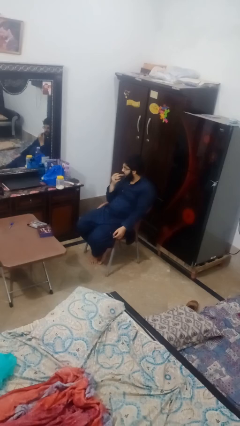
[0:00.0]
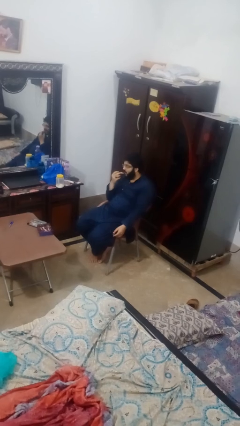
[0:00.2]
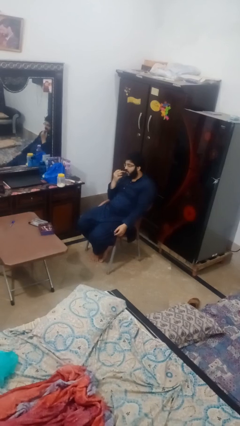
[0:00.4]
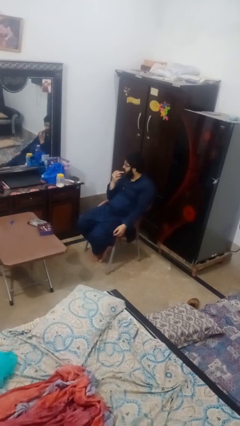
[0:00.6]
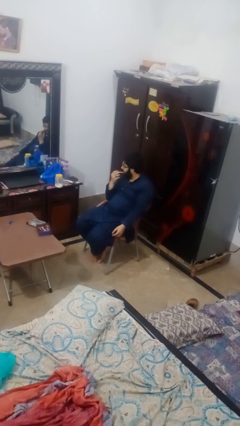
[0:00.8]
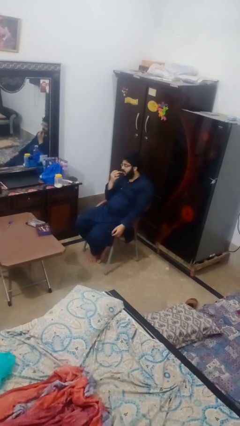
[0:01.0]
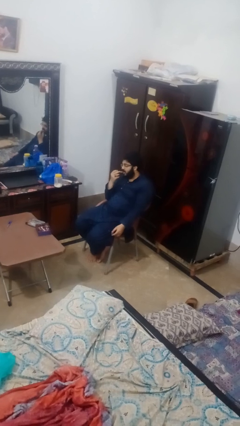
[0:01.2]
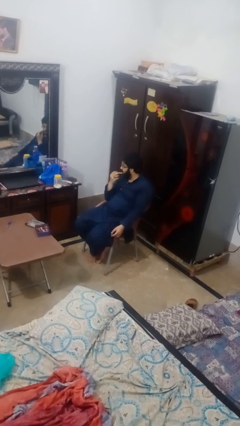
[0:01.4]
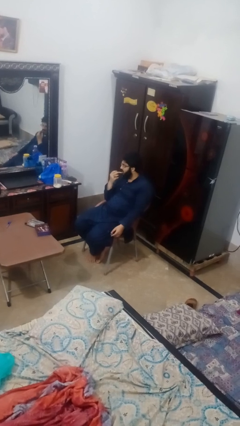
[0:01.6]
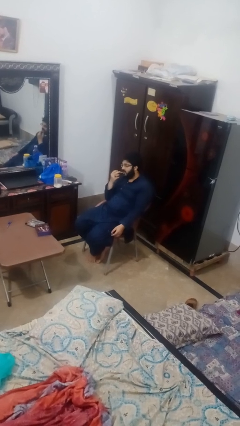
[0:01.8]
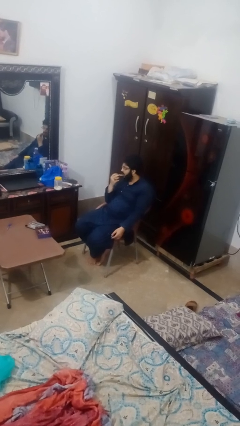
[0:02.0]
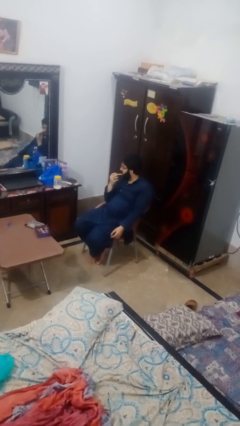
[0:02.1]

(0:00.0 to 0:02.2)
person applies lip makeup

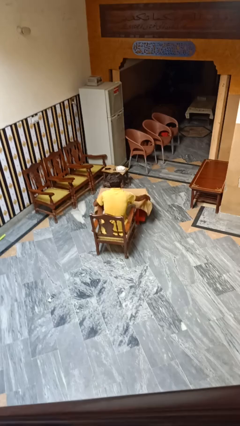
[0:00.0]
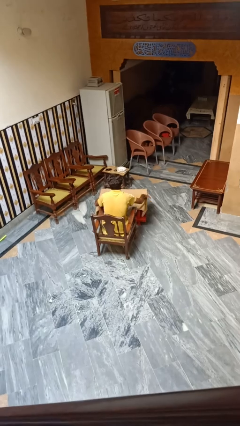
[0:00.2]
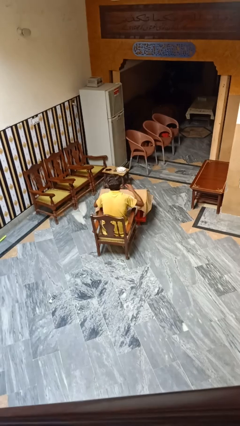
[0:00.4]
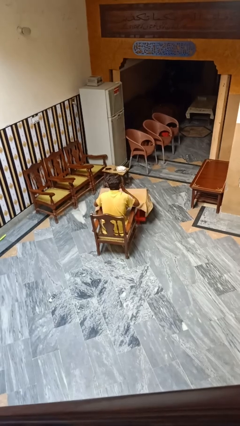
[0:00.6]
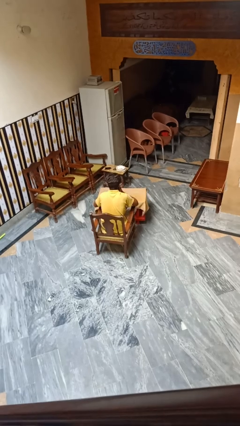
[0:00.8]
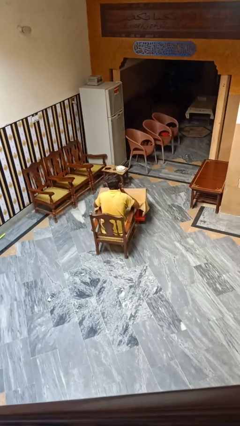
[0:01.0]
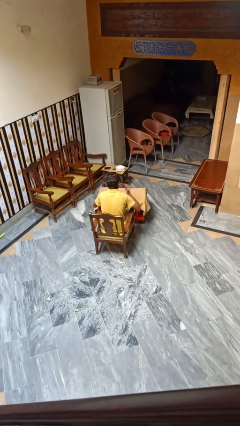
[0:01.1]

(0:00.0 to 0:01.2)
person folds tablecloth

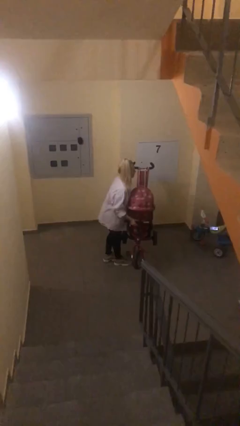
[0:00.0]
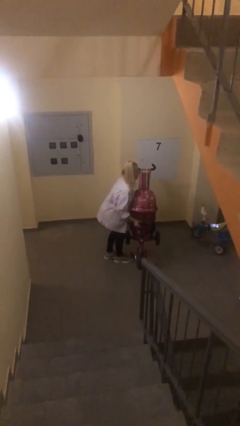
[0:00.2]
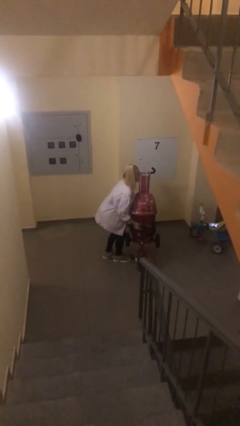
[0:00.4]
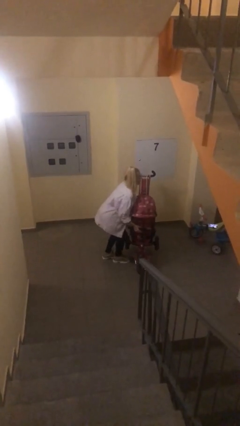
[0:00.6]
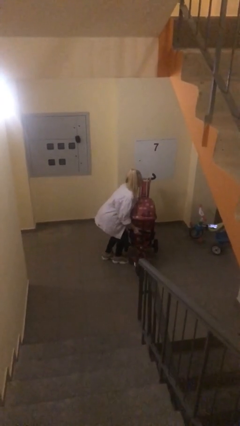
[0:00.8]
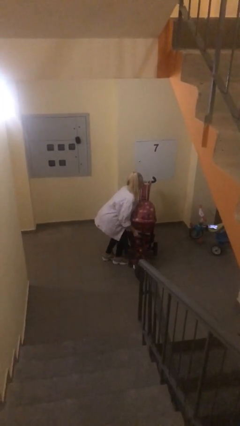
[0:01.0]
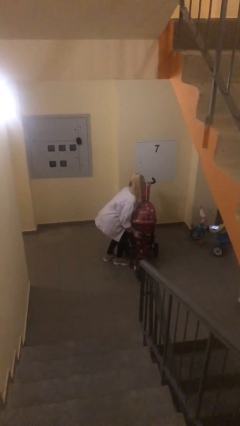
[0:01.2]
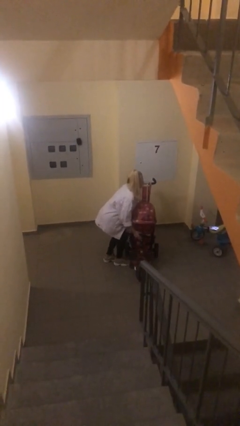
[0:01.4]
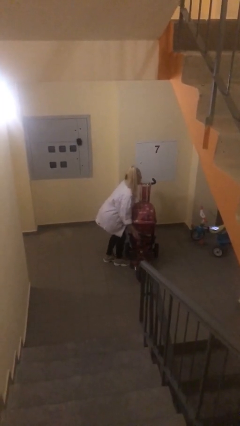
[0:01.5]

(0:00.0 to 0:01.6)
person puts down object on floor

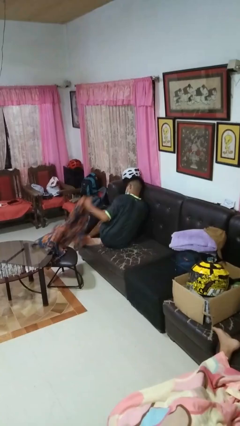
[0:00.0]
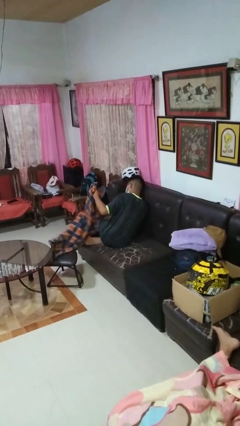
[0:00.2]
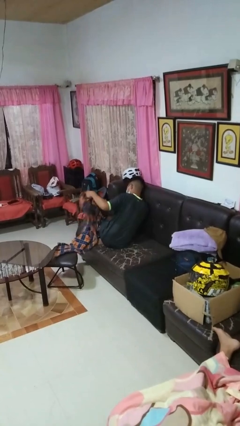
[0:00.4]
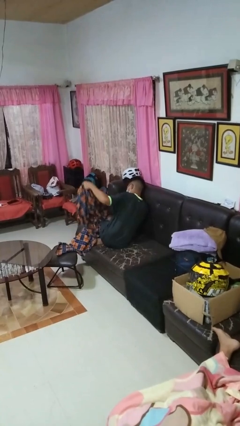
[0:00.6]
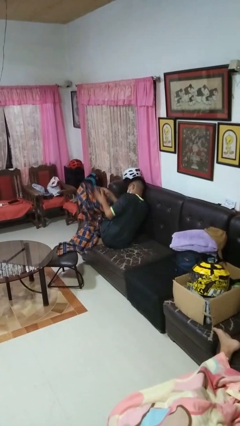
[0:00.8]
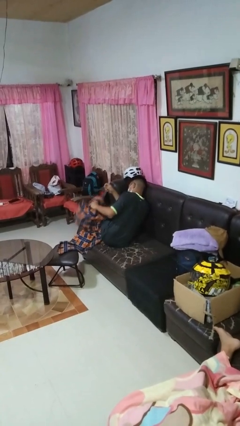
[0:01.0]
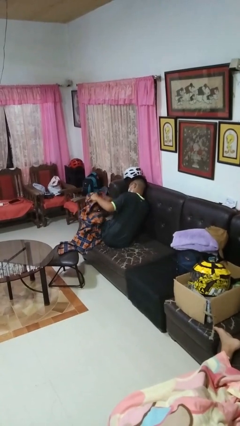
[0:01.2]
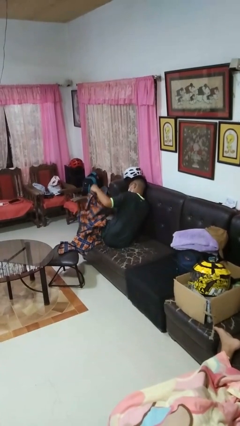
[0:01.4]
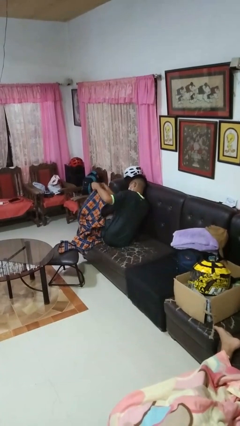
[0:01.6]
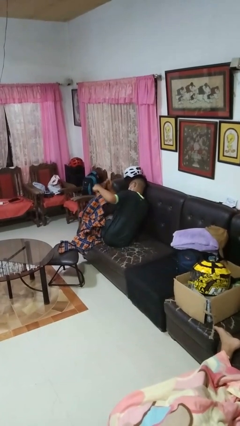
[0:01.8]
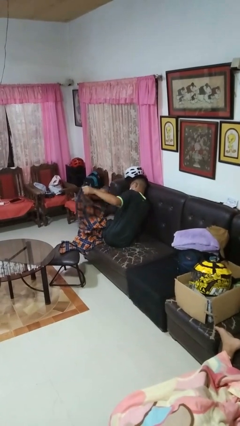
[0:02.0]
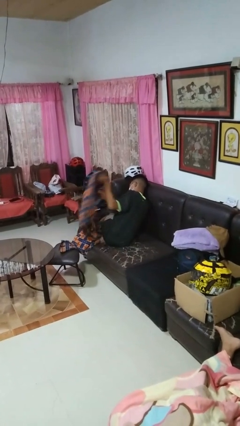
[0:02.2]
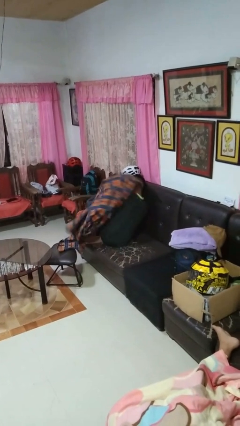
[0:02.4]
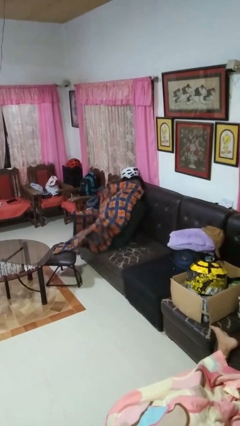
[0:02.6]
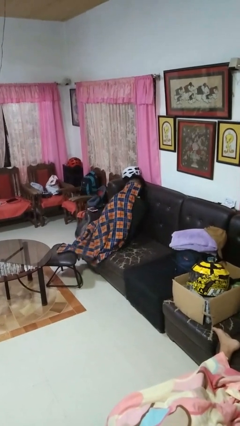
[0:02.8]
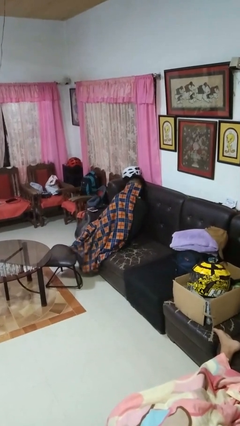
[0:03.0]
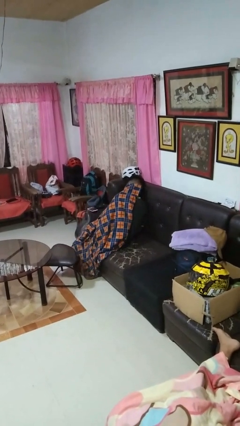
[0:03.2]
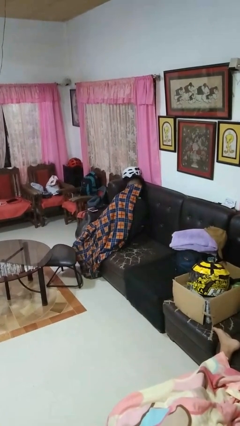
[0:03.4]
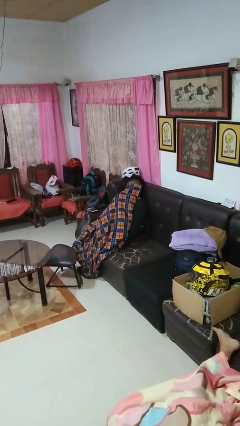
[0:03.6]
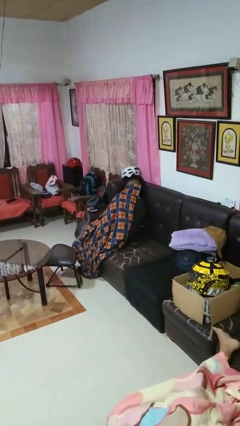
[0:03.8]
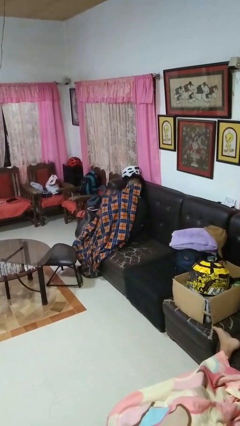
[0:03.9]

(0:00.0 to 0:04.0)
person covers with blanket

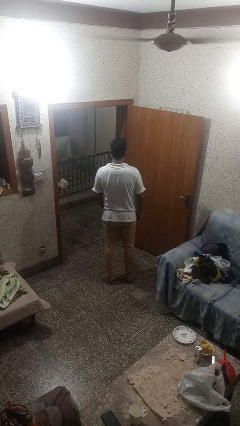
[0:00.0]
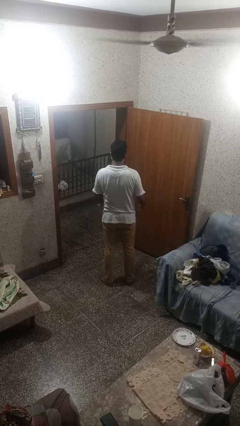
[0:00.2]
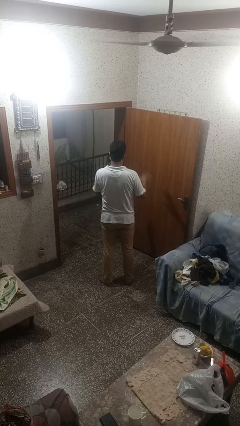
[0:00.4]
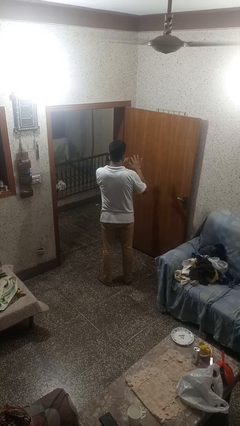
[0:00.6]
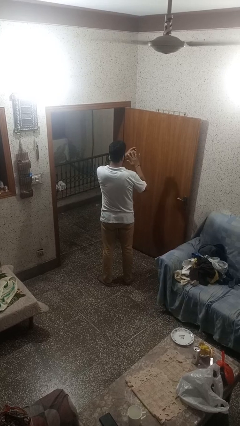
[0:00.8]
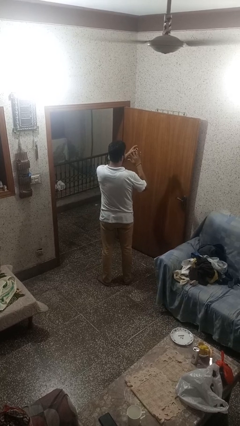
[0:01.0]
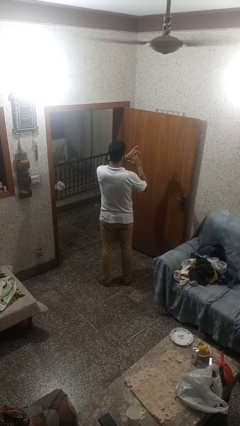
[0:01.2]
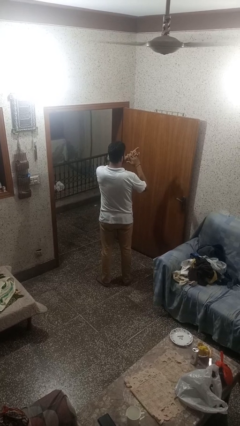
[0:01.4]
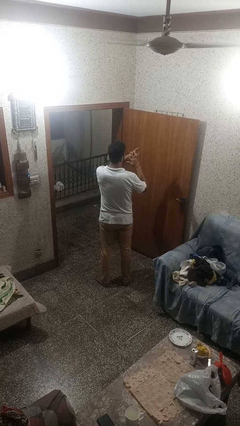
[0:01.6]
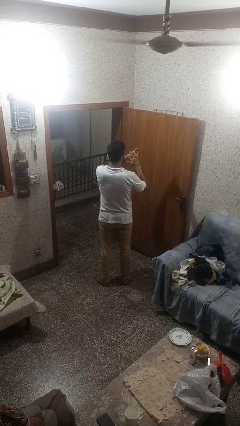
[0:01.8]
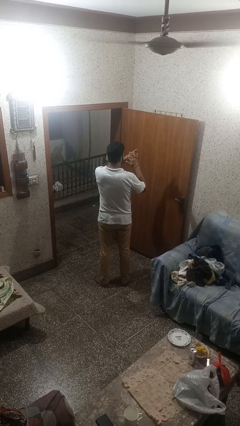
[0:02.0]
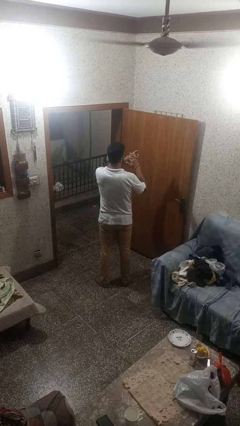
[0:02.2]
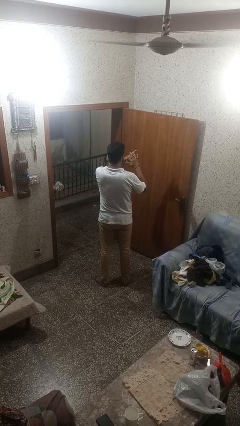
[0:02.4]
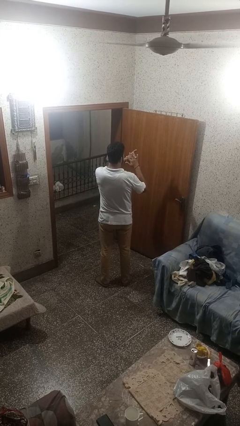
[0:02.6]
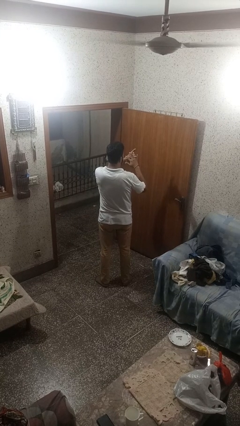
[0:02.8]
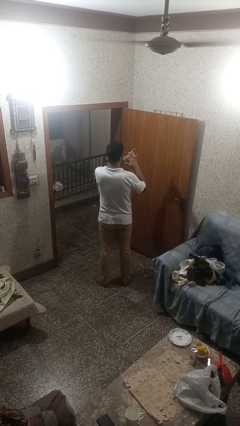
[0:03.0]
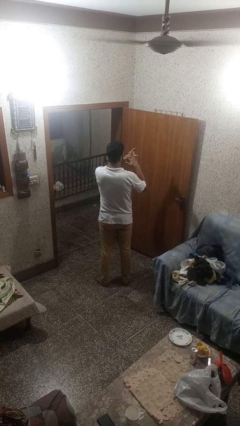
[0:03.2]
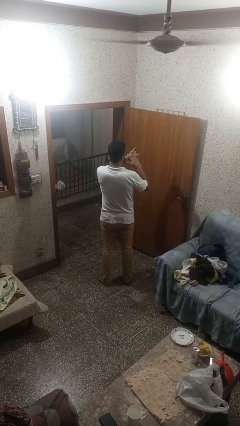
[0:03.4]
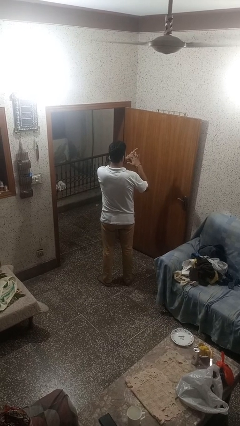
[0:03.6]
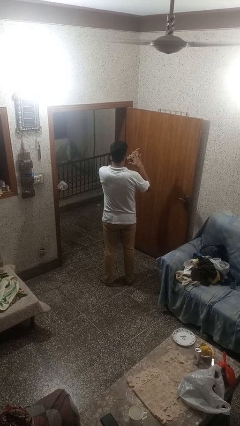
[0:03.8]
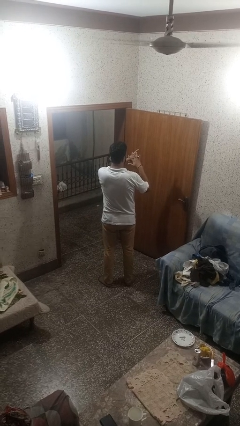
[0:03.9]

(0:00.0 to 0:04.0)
person puts on ring

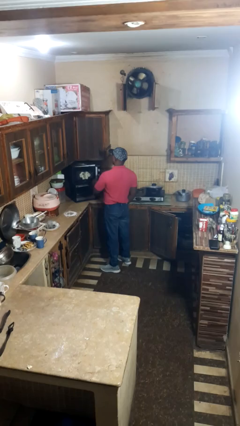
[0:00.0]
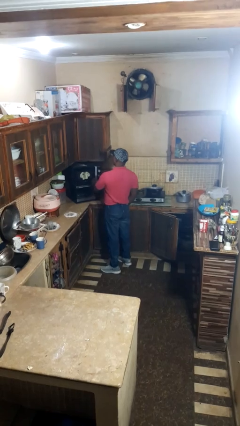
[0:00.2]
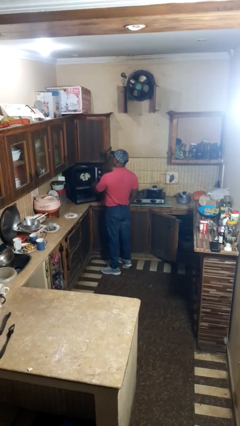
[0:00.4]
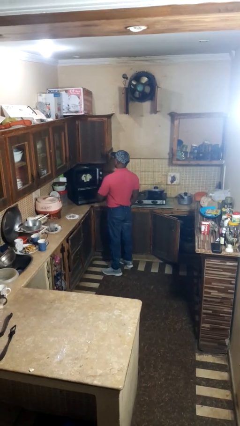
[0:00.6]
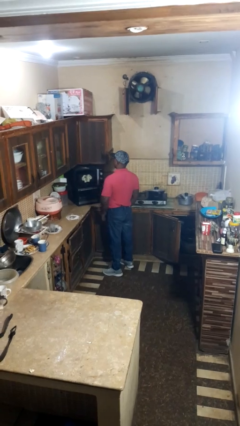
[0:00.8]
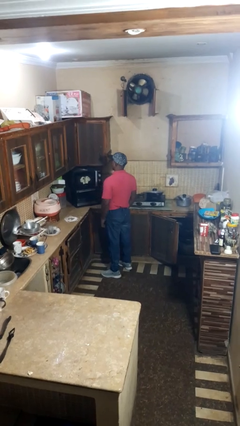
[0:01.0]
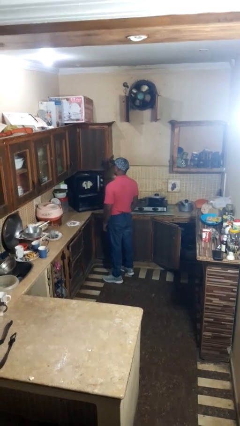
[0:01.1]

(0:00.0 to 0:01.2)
person closes microwave

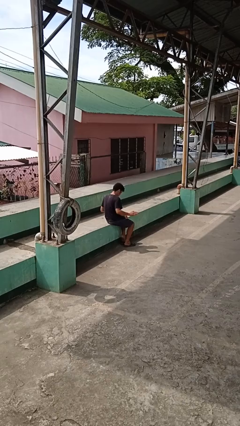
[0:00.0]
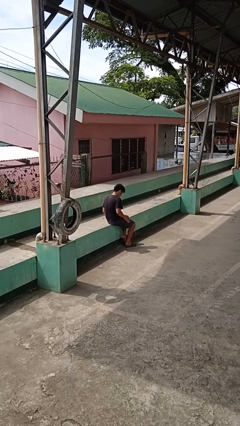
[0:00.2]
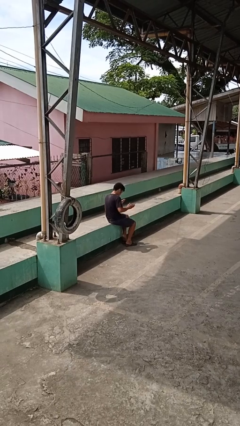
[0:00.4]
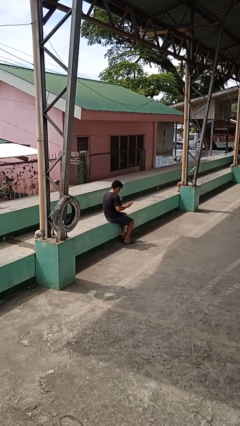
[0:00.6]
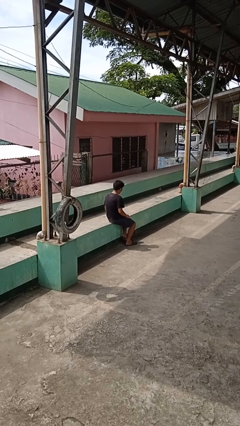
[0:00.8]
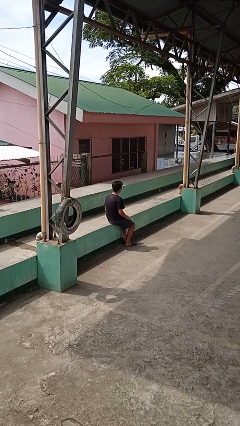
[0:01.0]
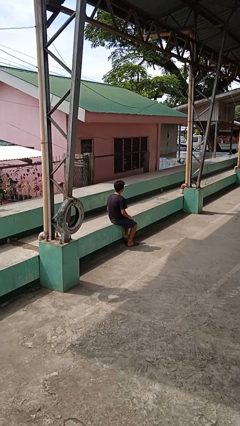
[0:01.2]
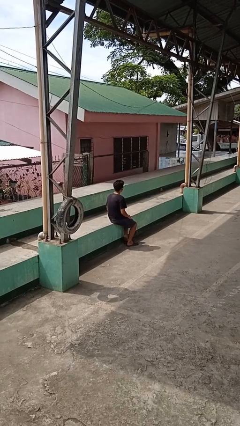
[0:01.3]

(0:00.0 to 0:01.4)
person slaps hands on thighs

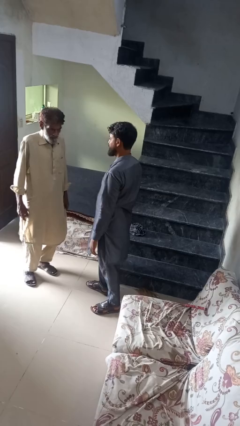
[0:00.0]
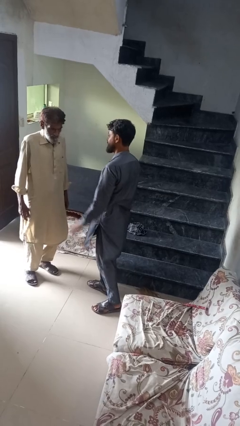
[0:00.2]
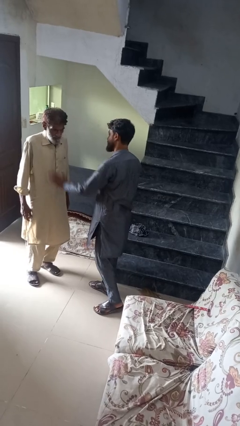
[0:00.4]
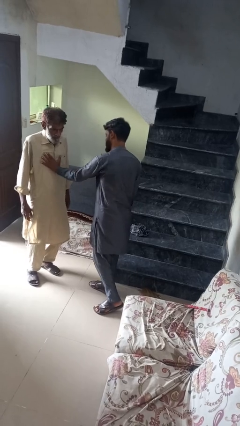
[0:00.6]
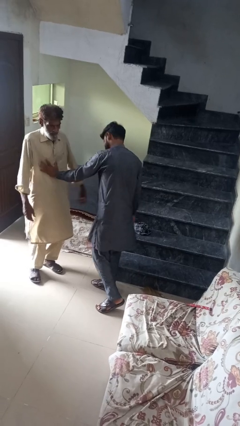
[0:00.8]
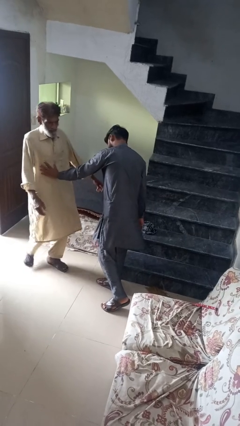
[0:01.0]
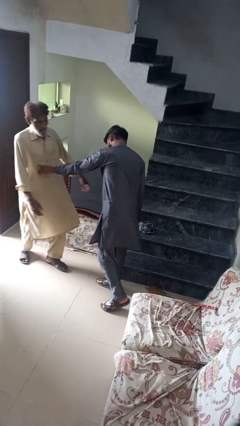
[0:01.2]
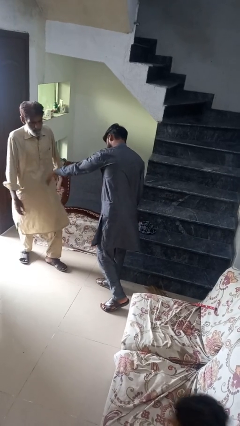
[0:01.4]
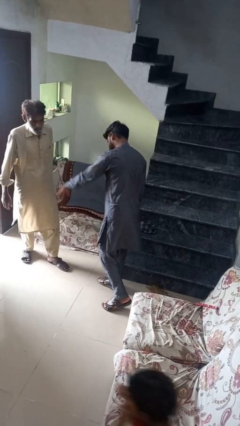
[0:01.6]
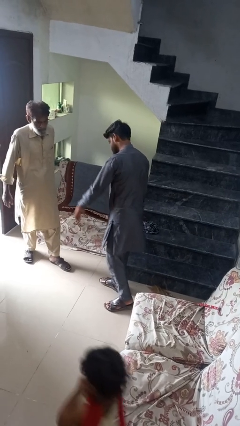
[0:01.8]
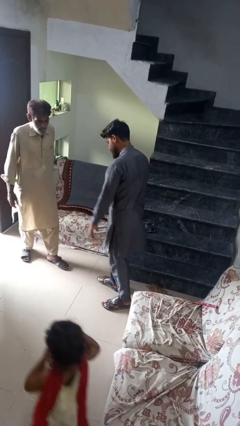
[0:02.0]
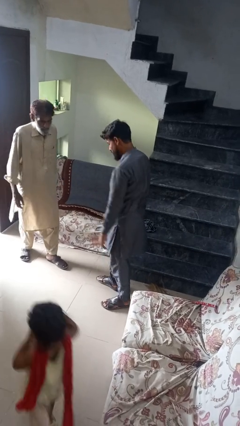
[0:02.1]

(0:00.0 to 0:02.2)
person shoves person
